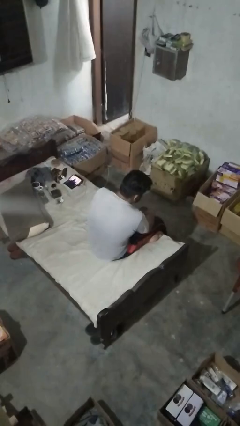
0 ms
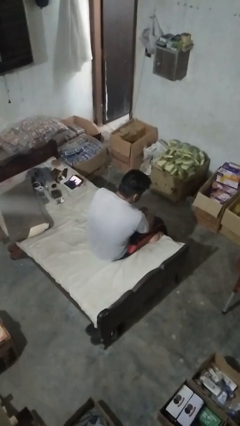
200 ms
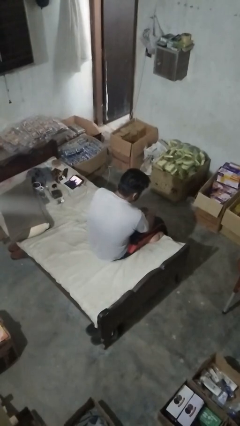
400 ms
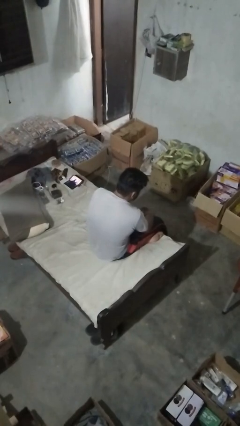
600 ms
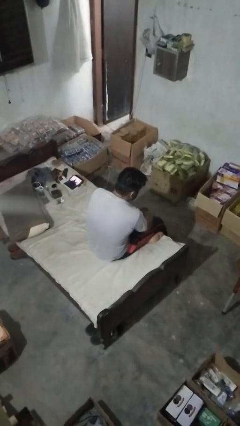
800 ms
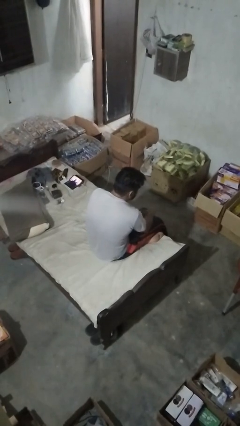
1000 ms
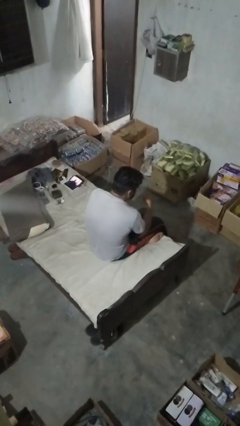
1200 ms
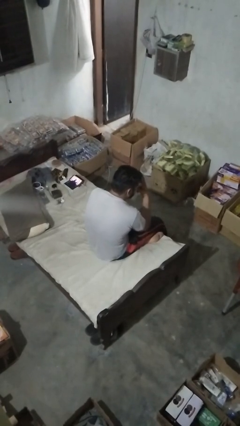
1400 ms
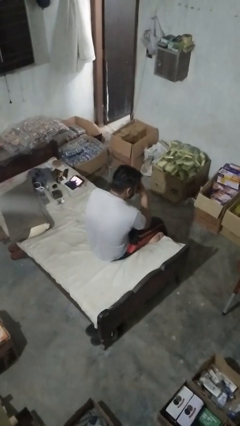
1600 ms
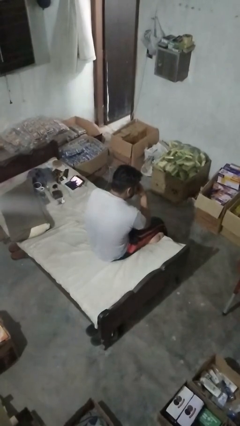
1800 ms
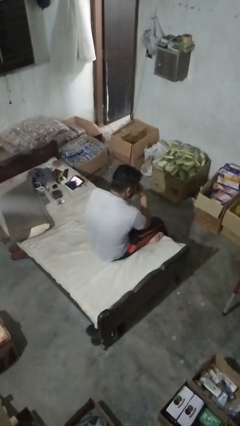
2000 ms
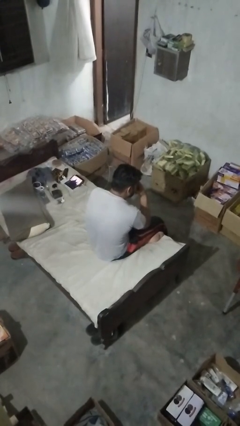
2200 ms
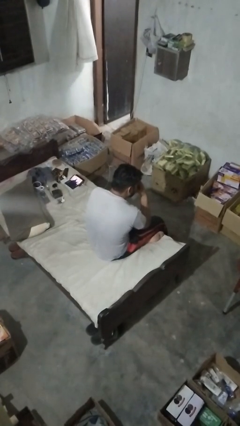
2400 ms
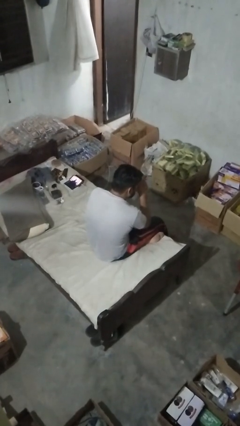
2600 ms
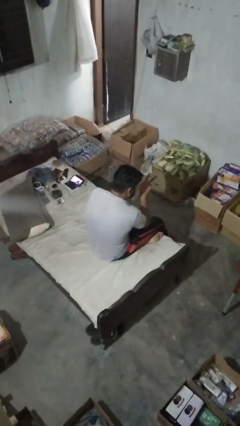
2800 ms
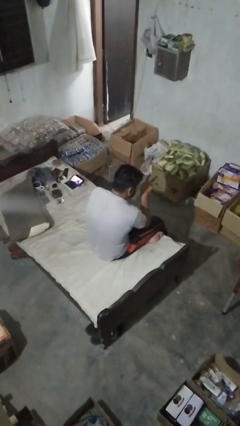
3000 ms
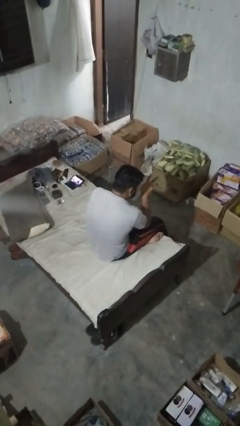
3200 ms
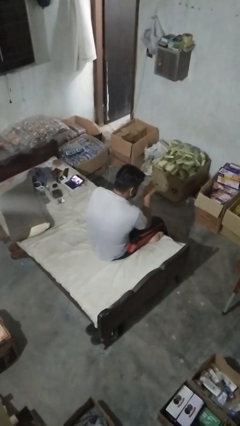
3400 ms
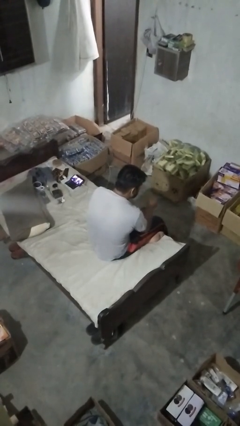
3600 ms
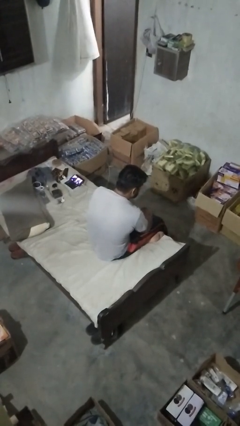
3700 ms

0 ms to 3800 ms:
person gestures watch closely

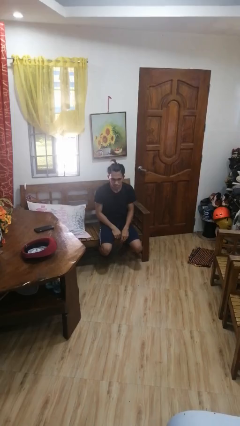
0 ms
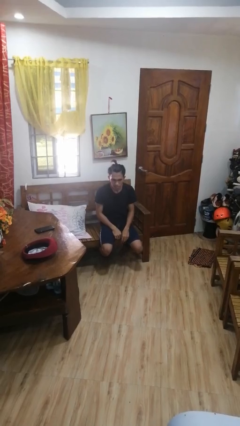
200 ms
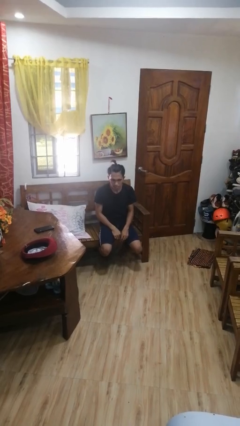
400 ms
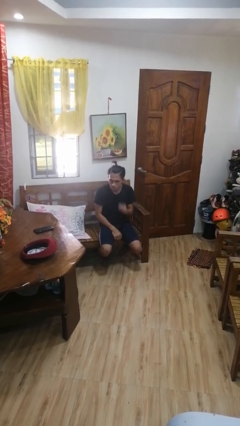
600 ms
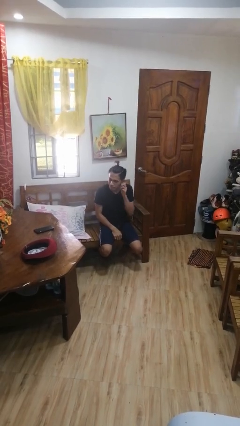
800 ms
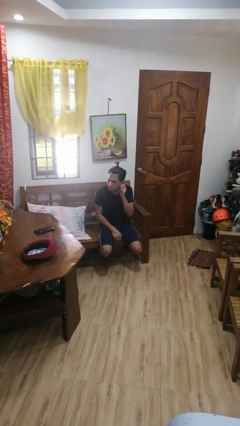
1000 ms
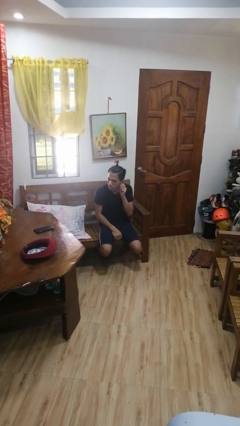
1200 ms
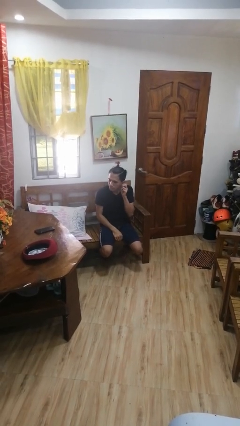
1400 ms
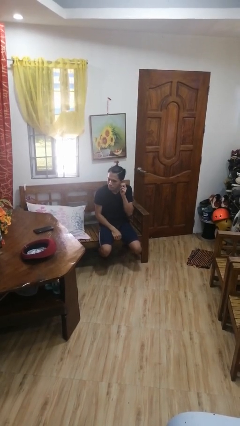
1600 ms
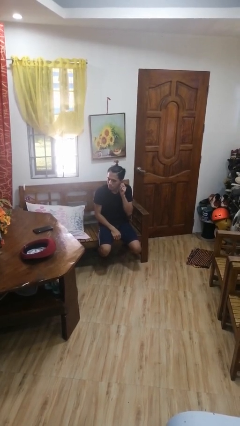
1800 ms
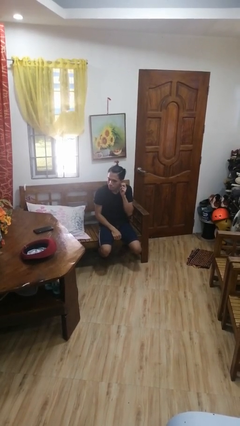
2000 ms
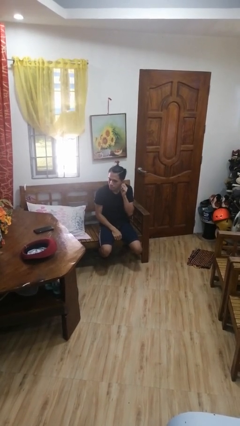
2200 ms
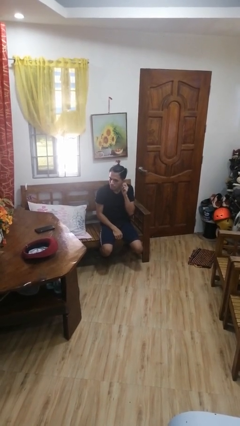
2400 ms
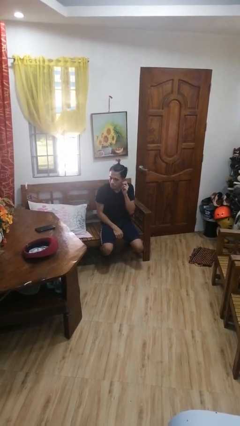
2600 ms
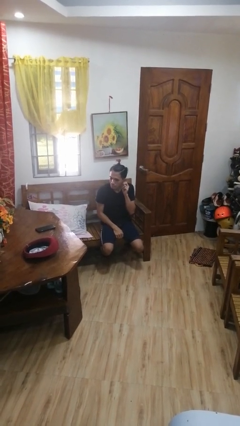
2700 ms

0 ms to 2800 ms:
person touches earlobe

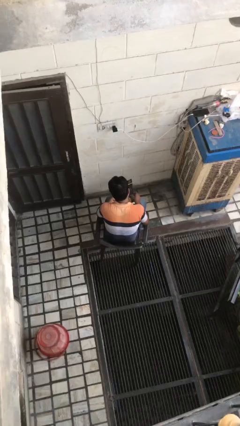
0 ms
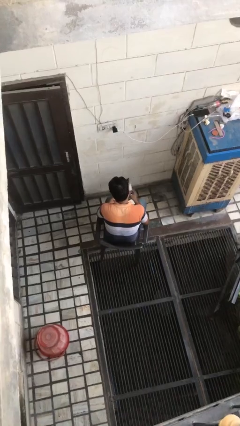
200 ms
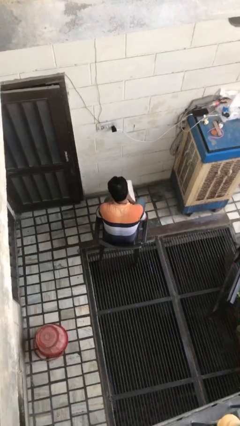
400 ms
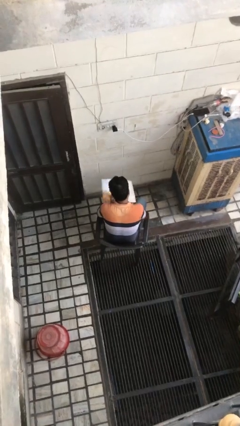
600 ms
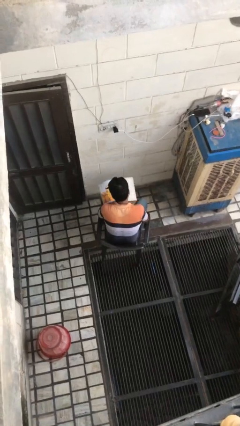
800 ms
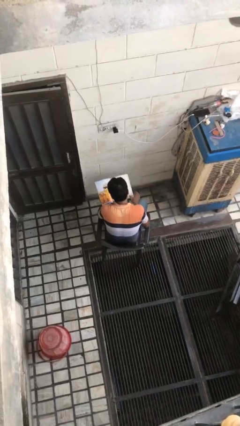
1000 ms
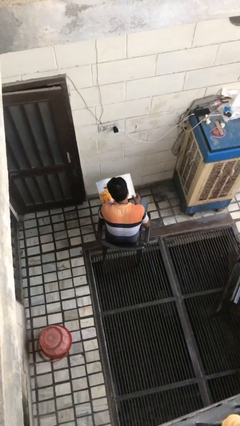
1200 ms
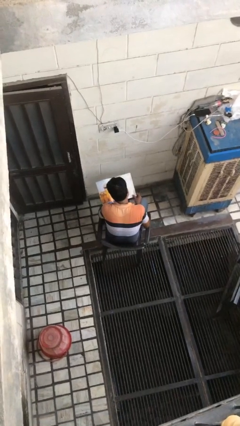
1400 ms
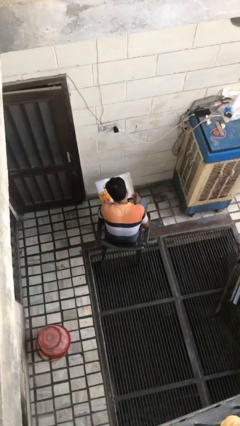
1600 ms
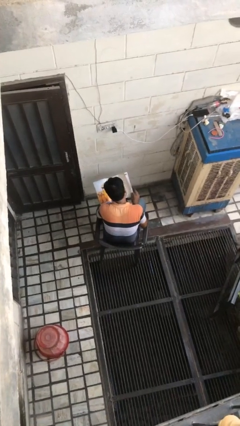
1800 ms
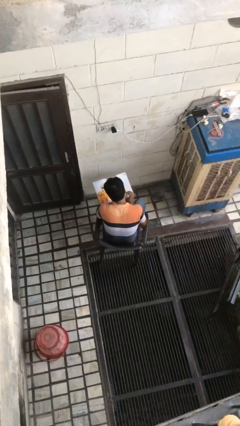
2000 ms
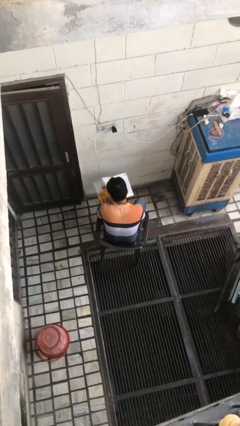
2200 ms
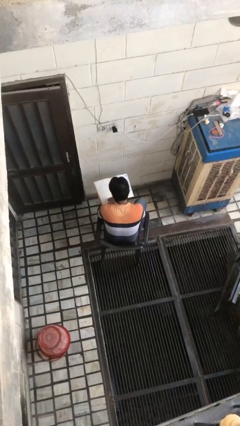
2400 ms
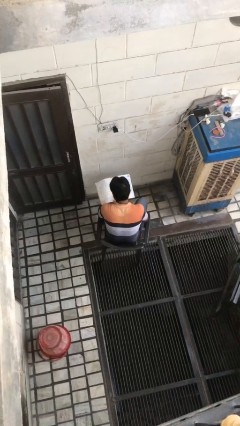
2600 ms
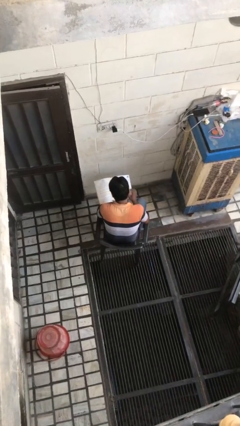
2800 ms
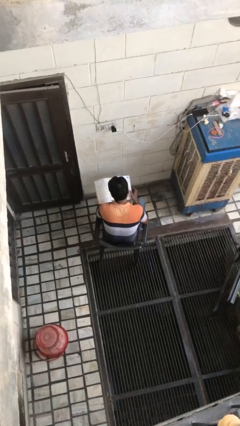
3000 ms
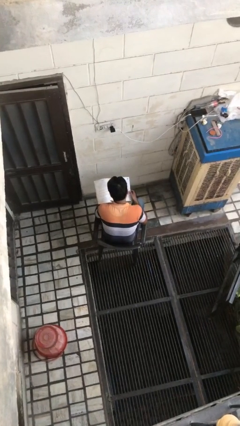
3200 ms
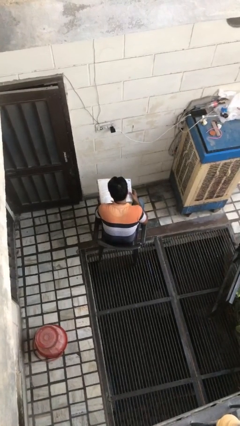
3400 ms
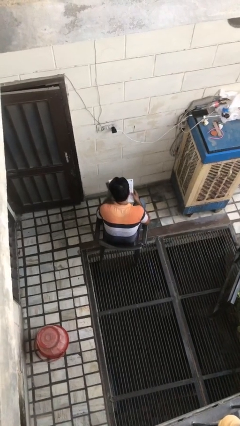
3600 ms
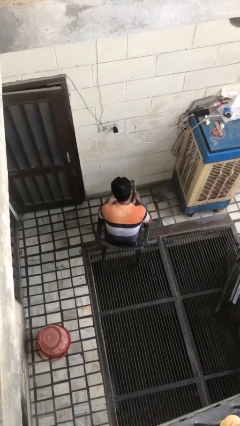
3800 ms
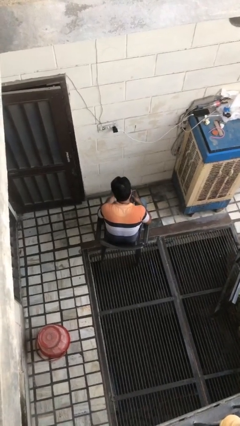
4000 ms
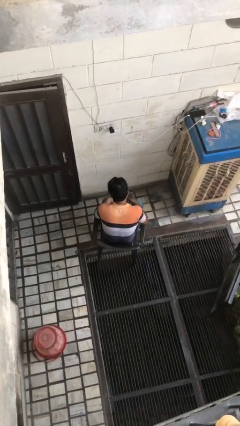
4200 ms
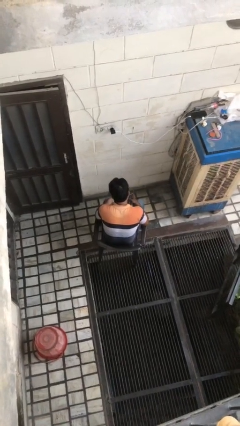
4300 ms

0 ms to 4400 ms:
person reads magazine

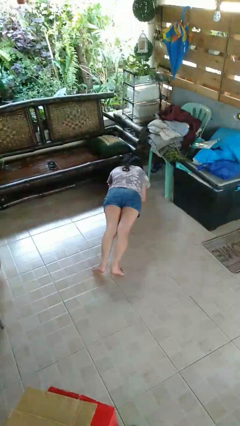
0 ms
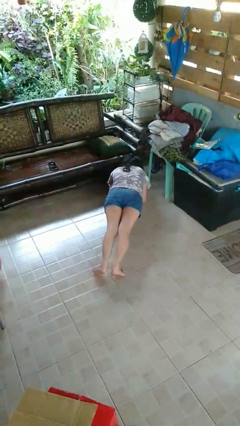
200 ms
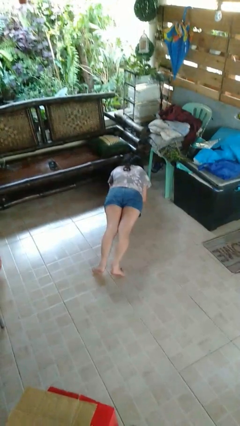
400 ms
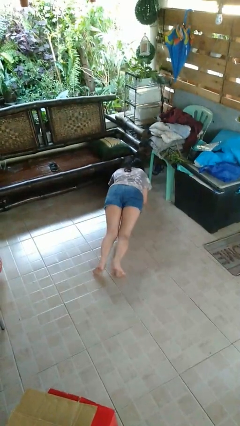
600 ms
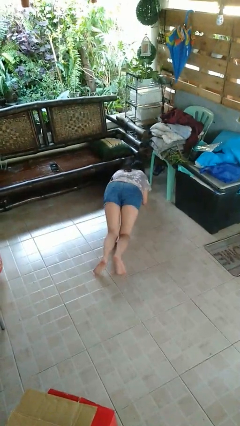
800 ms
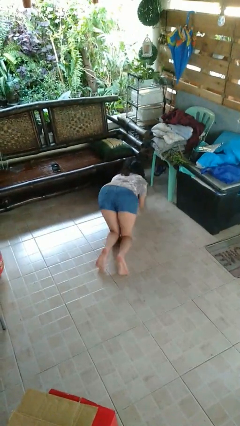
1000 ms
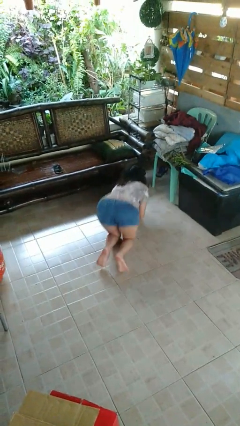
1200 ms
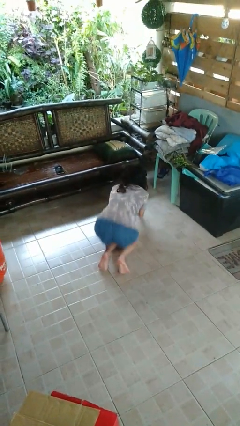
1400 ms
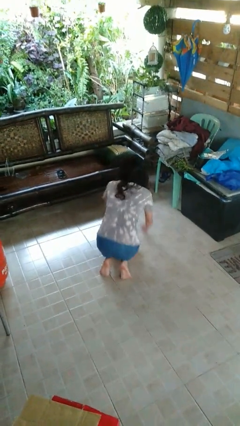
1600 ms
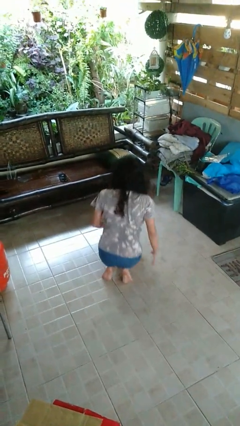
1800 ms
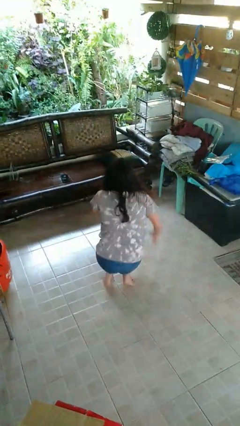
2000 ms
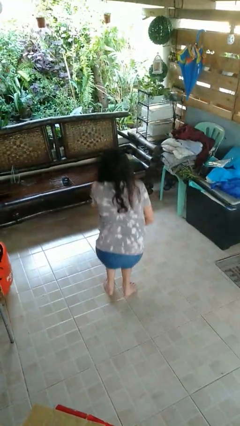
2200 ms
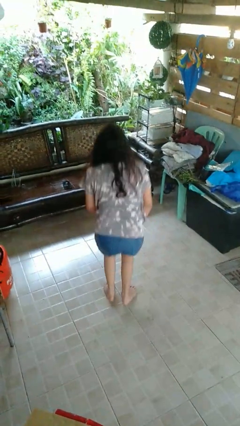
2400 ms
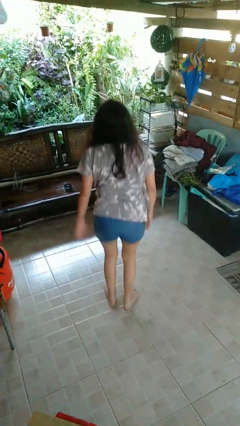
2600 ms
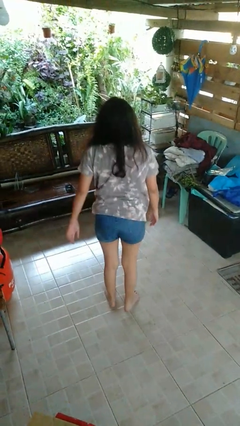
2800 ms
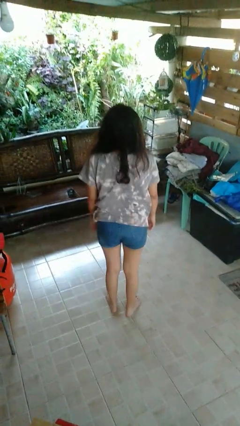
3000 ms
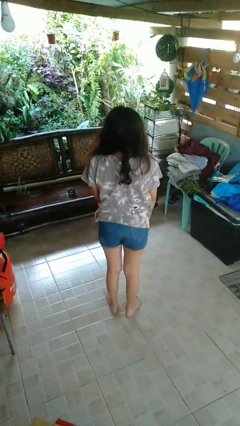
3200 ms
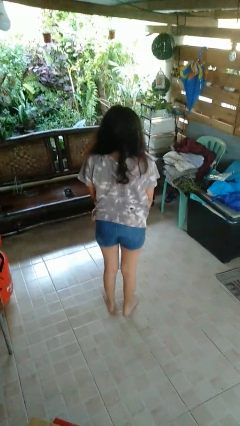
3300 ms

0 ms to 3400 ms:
person stands up from floor

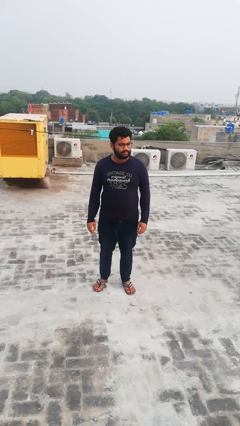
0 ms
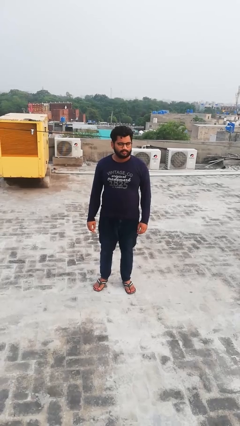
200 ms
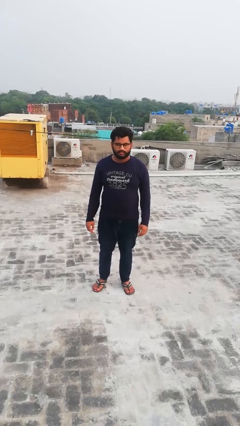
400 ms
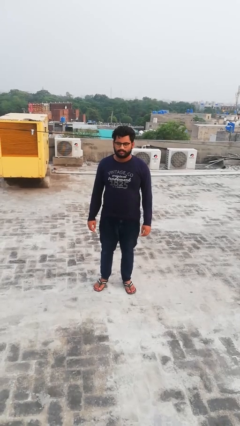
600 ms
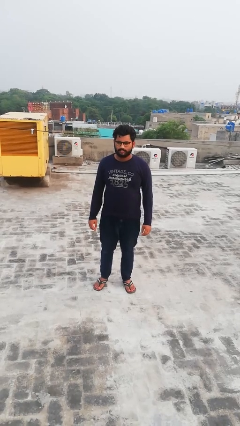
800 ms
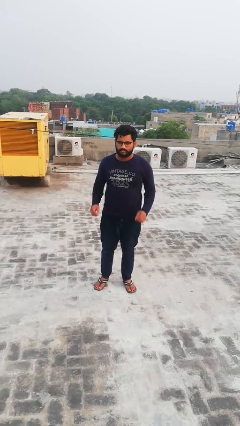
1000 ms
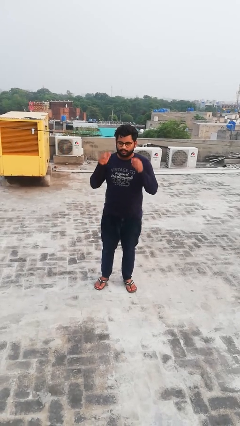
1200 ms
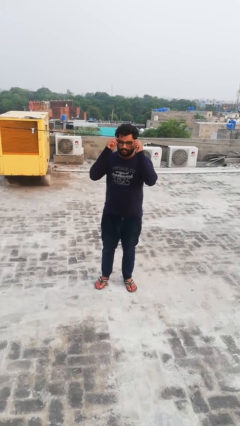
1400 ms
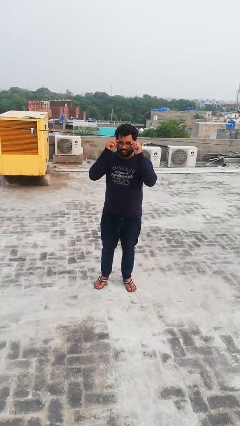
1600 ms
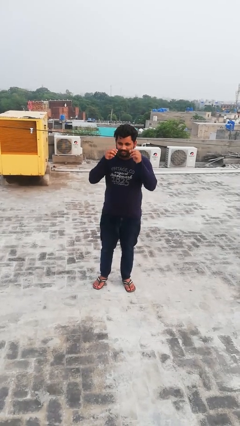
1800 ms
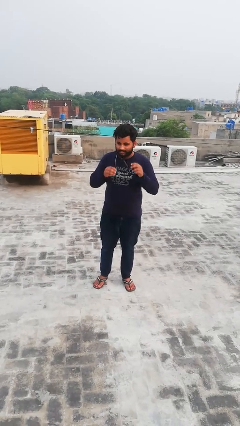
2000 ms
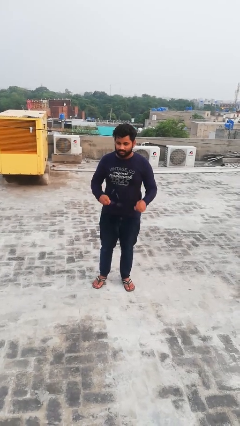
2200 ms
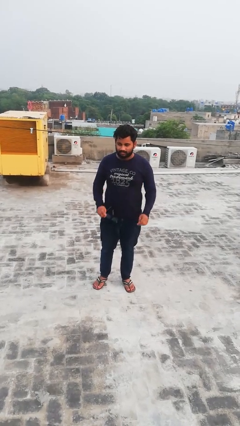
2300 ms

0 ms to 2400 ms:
person takes off glasses

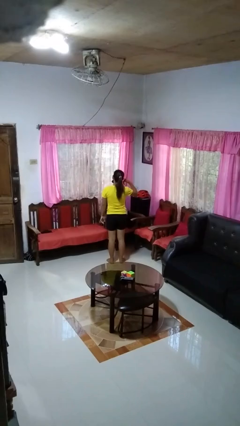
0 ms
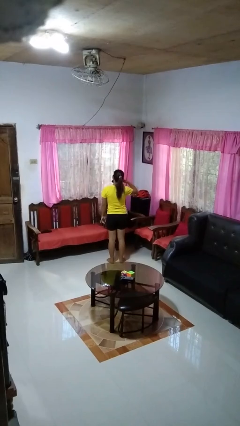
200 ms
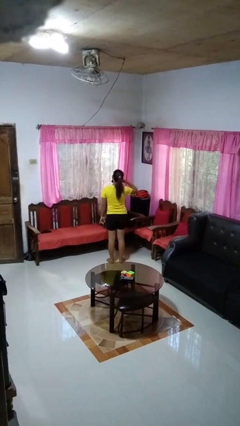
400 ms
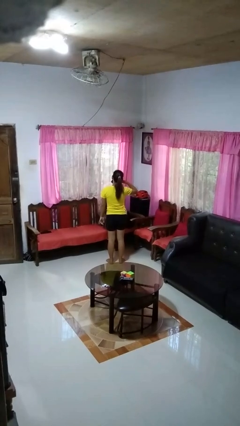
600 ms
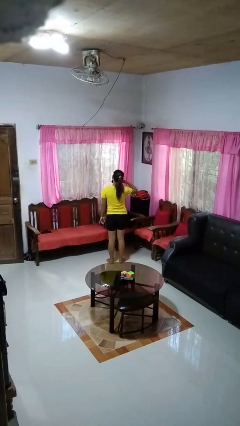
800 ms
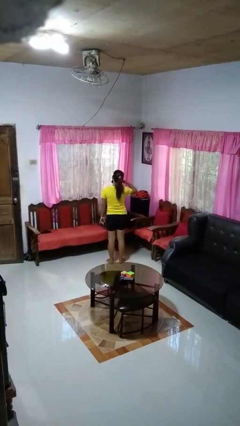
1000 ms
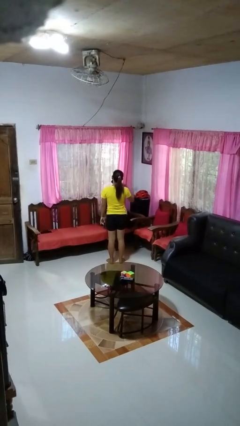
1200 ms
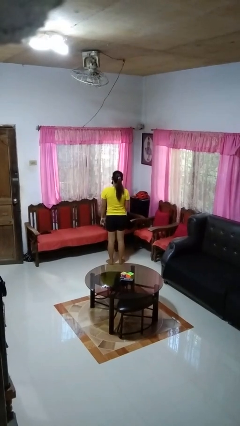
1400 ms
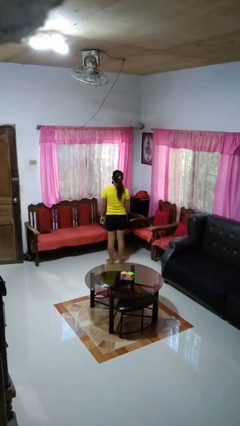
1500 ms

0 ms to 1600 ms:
person gestures call me
